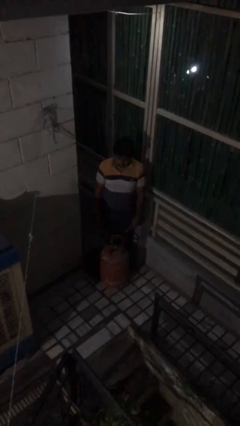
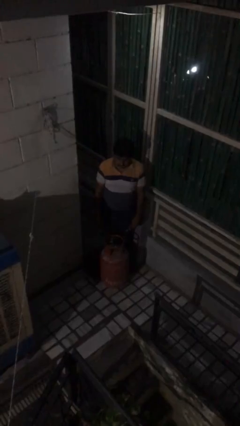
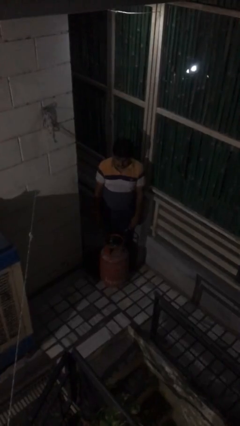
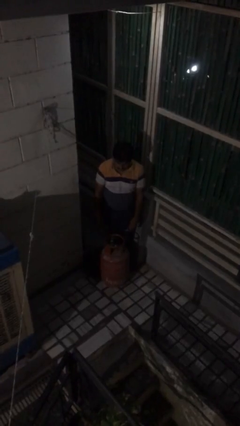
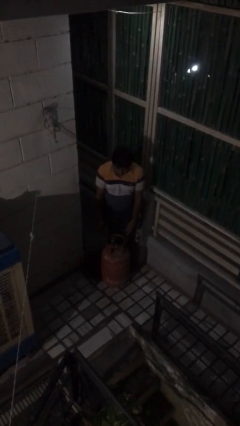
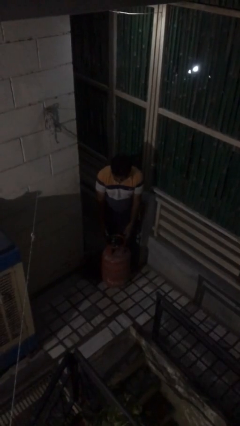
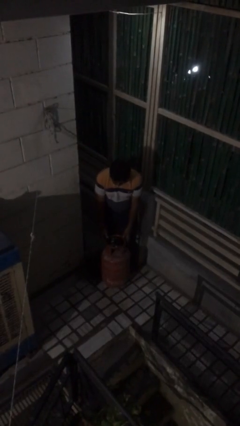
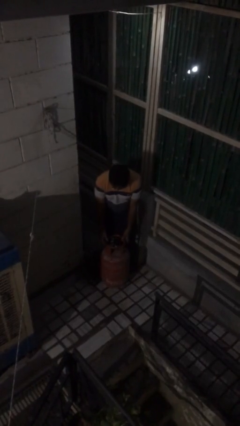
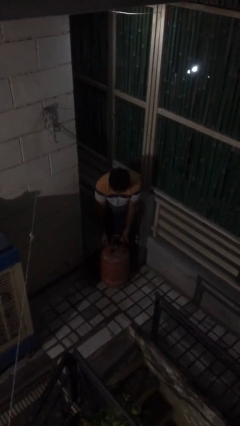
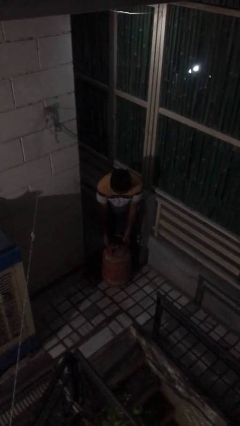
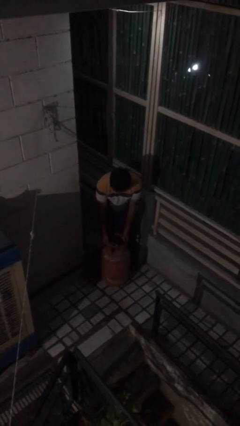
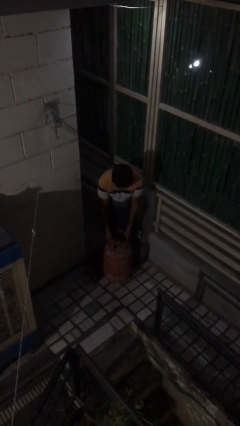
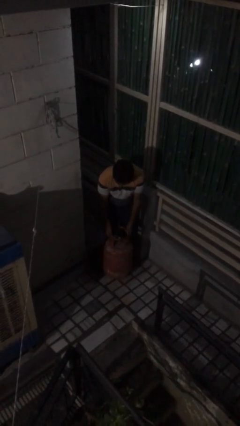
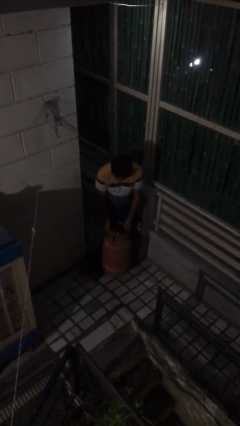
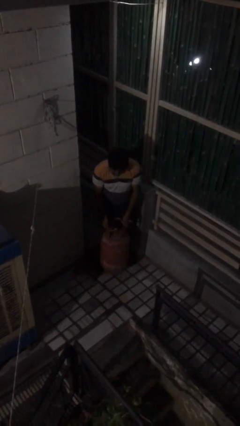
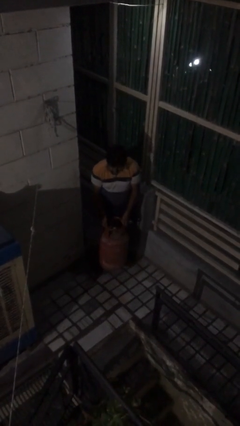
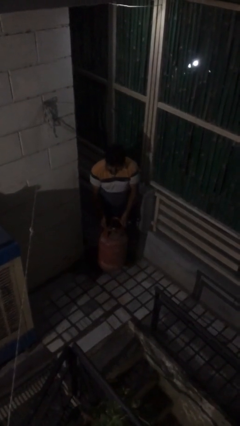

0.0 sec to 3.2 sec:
person picks up object from floor

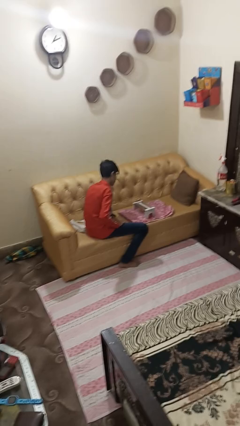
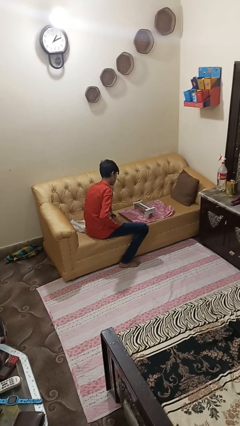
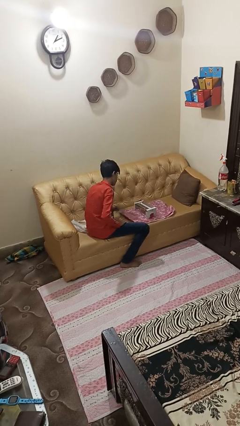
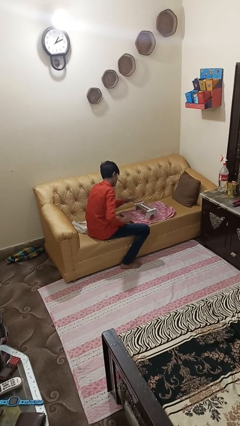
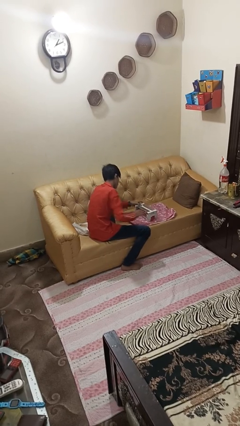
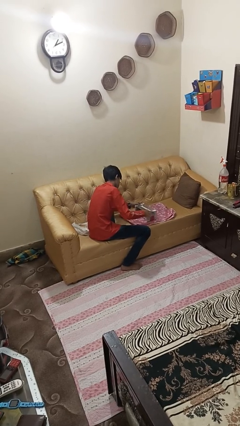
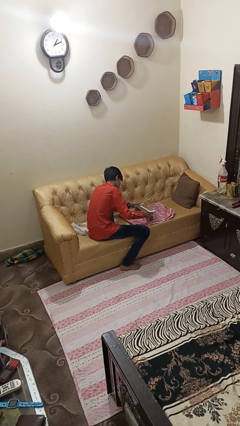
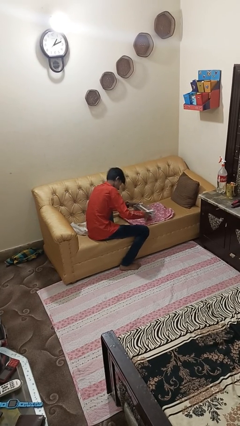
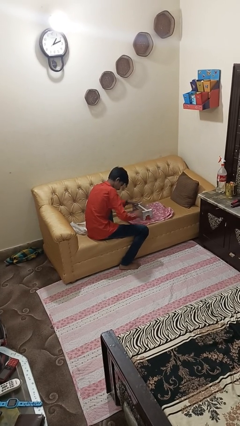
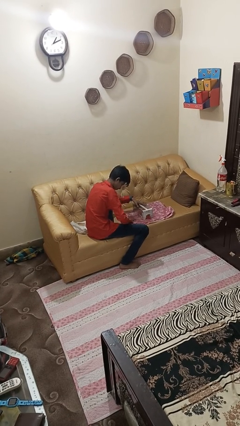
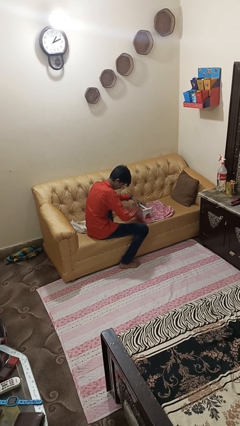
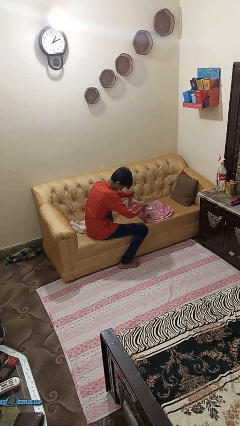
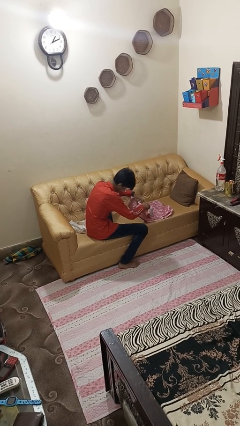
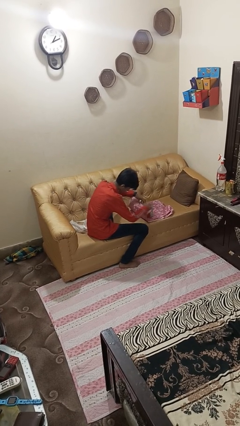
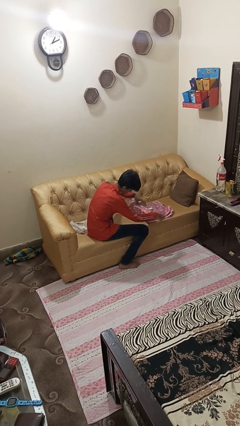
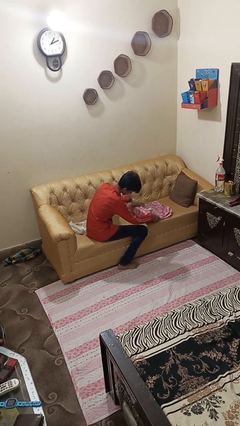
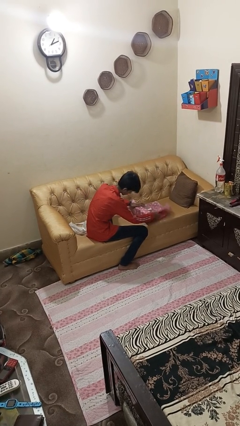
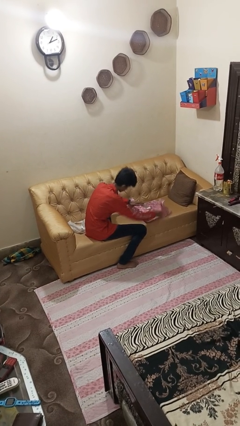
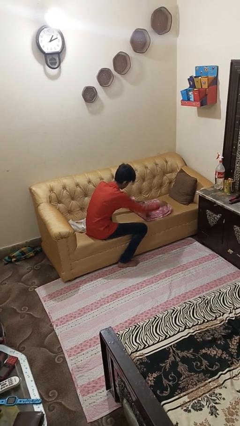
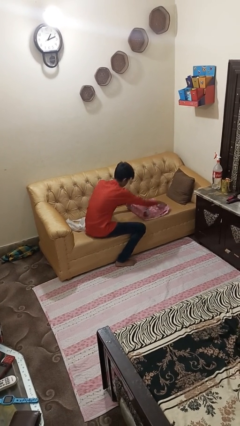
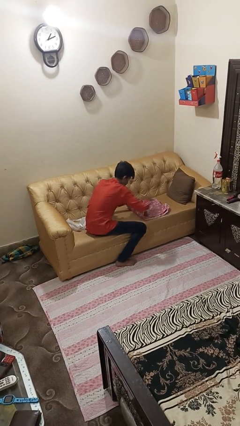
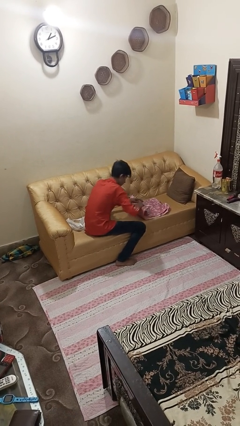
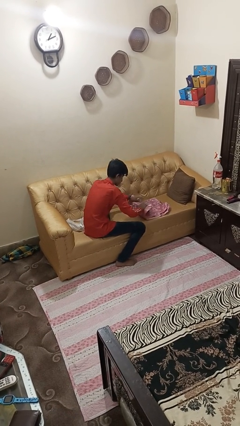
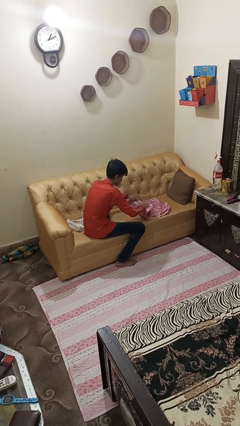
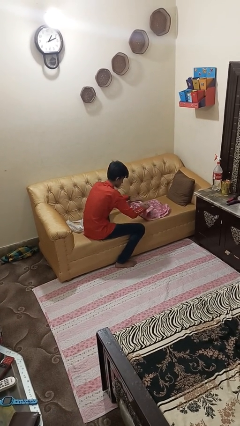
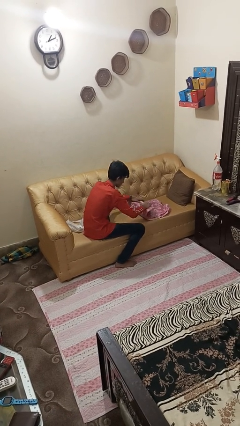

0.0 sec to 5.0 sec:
person wraps box

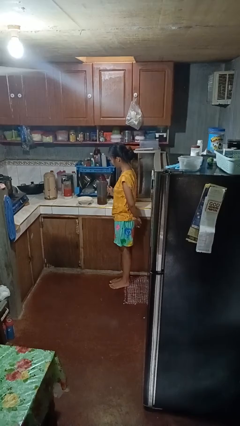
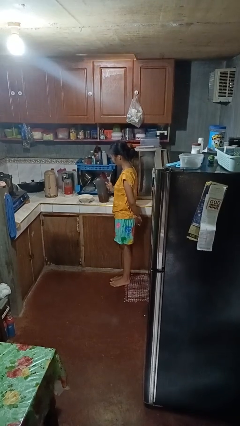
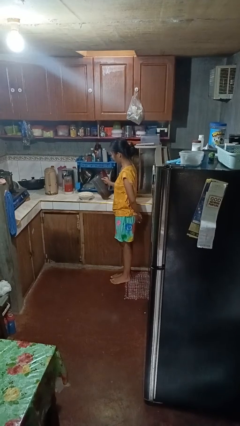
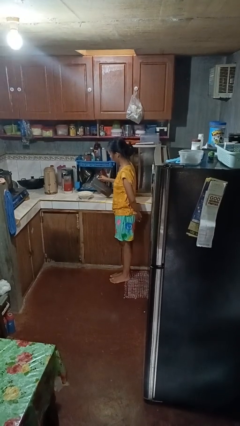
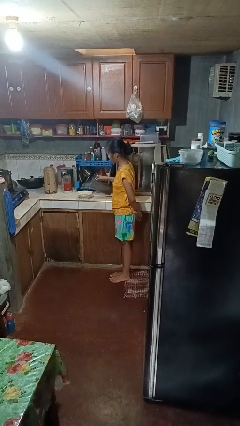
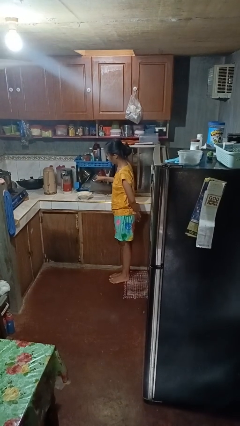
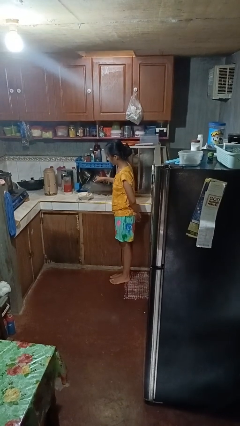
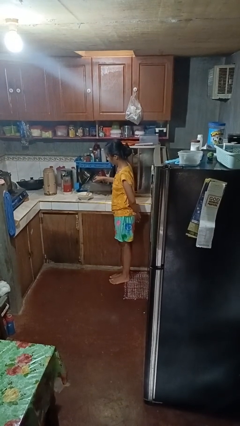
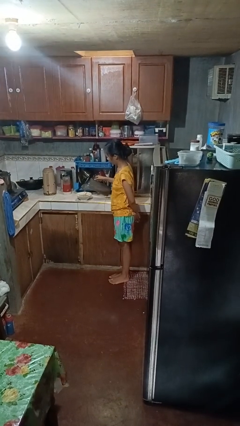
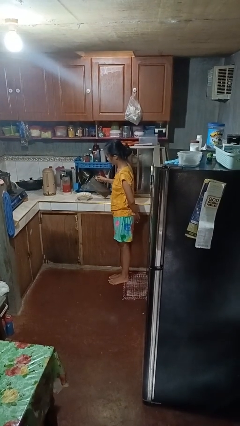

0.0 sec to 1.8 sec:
person pours into bowl

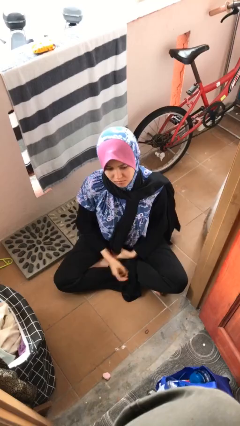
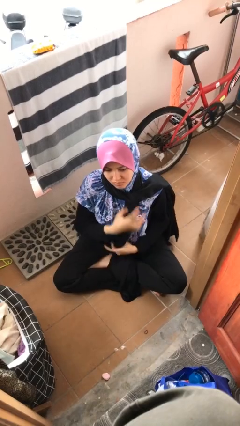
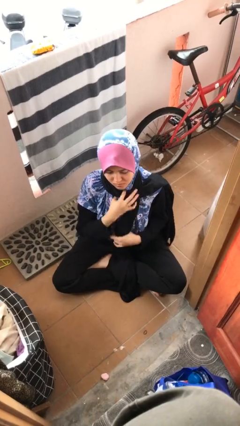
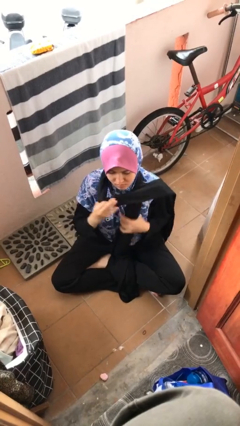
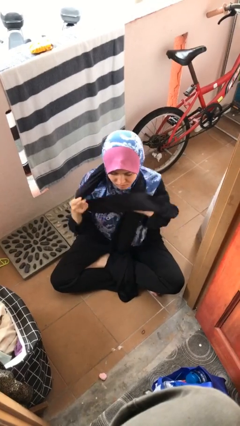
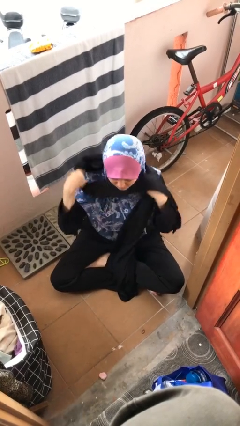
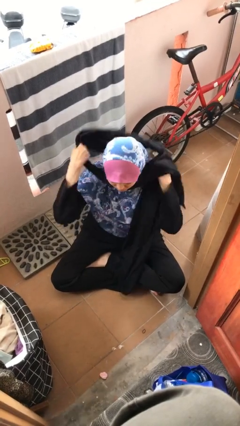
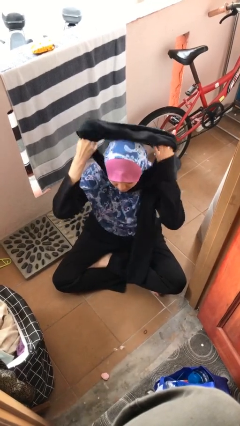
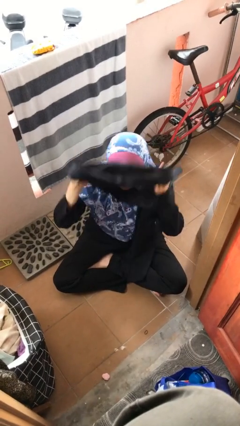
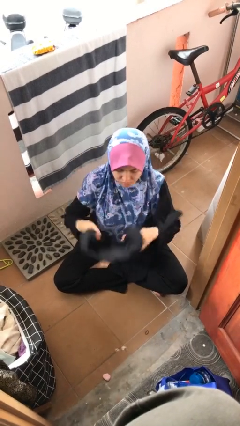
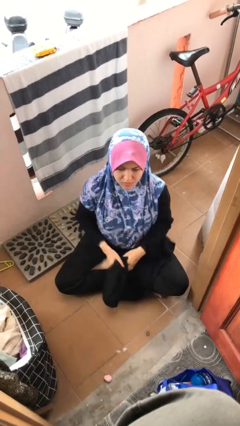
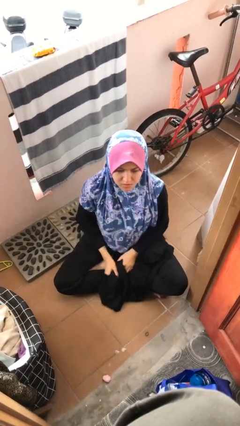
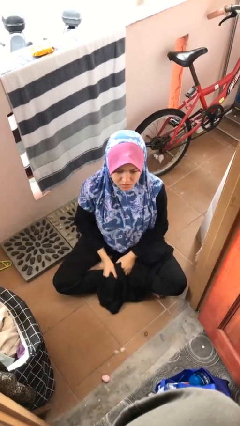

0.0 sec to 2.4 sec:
person takes off scarf

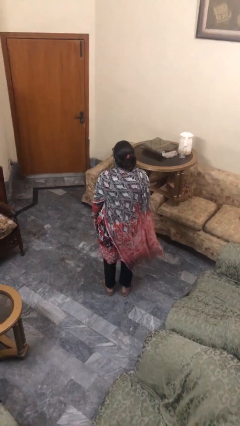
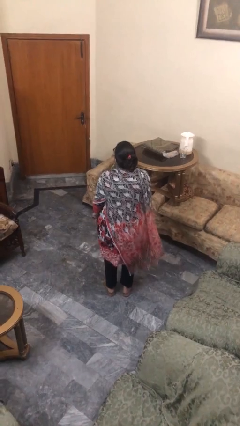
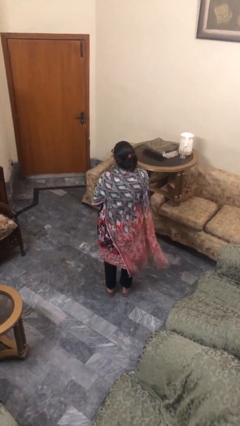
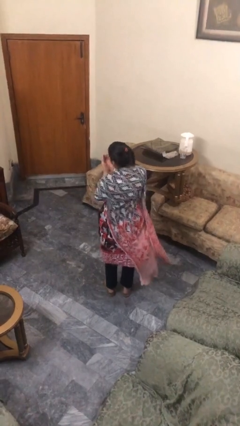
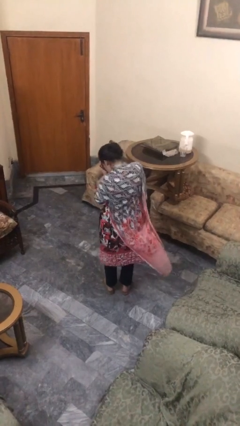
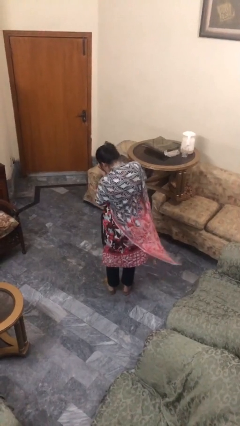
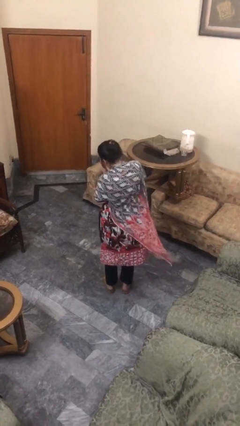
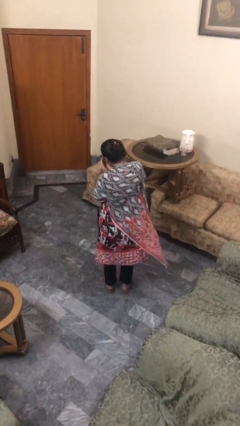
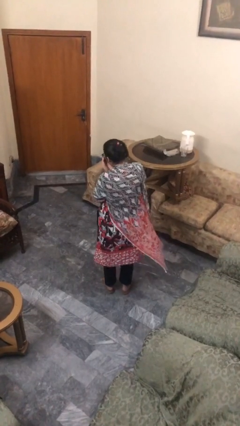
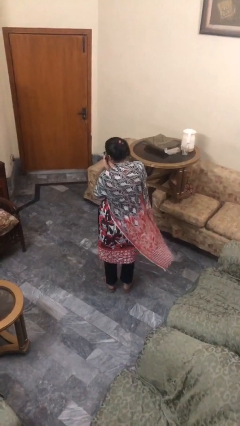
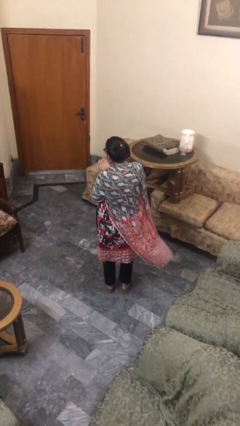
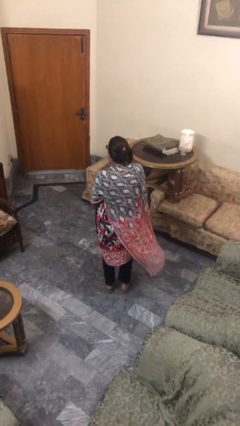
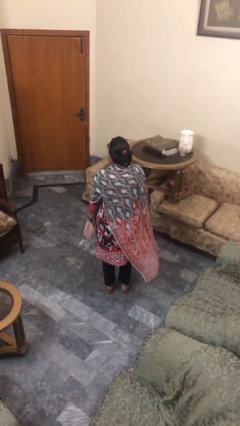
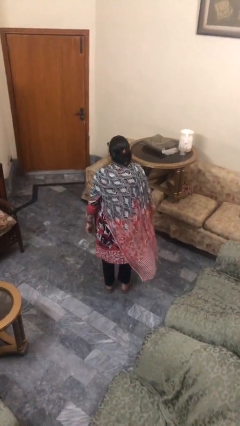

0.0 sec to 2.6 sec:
person sneezes into hand

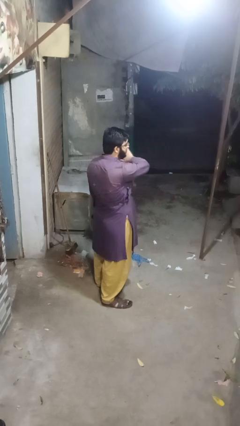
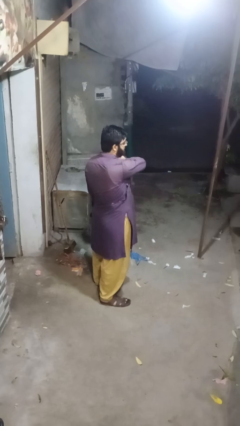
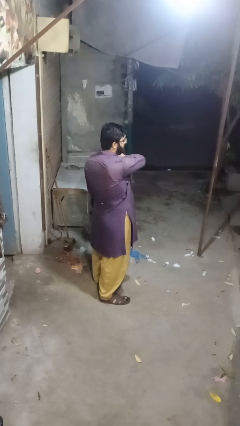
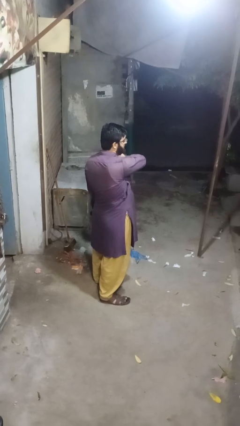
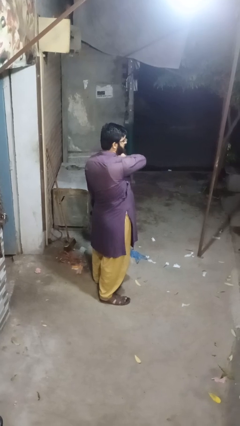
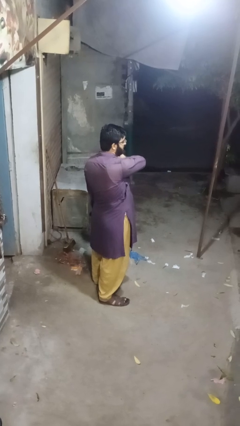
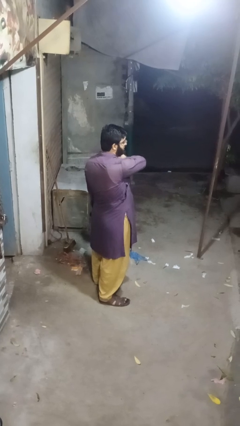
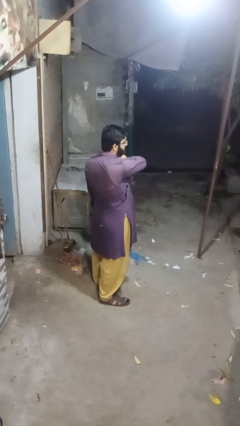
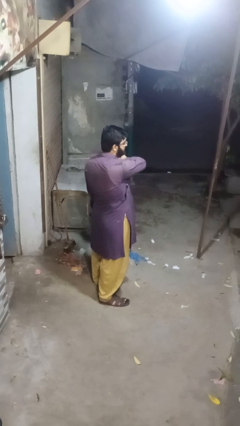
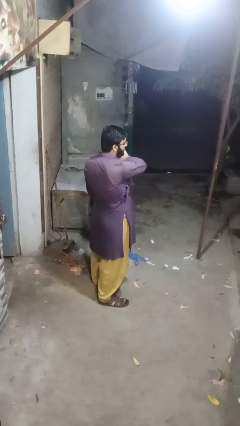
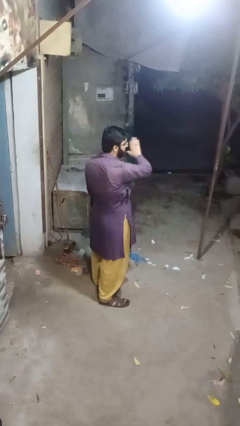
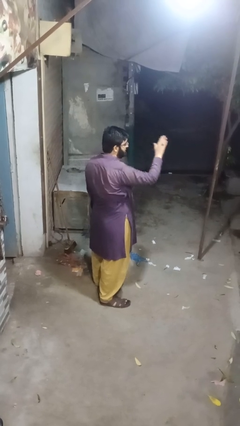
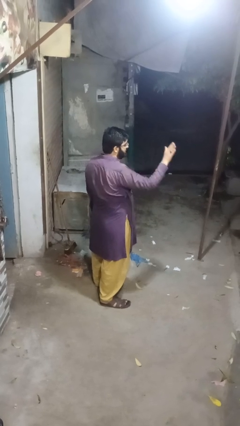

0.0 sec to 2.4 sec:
person gestures swipe left
